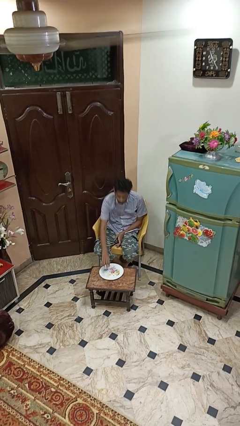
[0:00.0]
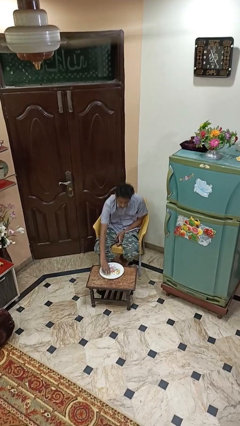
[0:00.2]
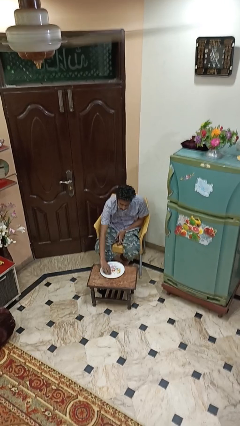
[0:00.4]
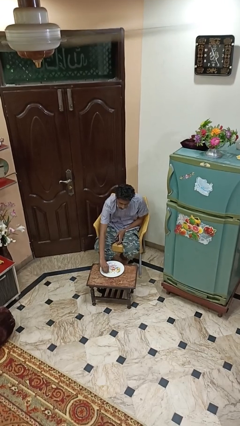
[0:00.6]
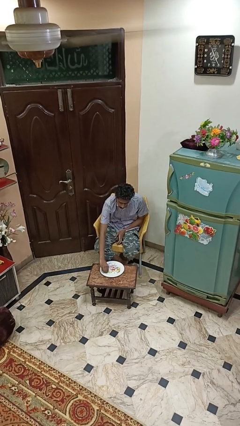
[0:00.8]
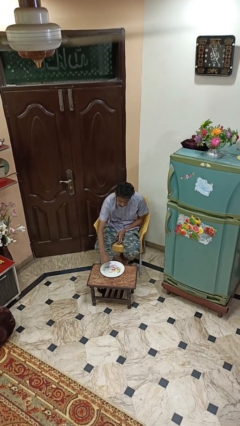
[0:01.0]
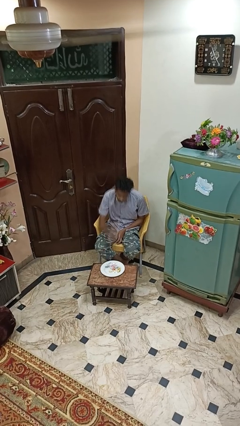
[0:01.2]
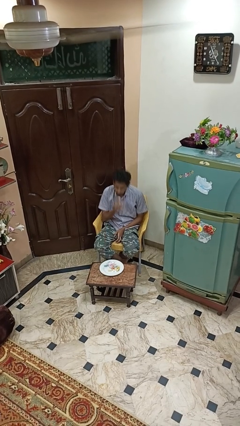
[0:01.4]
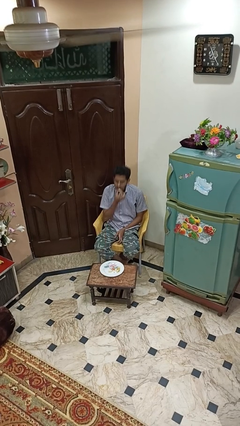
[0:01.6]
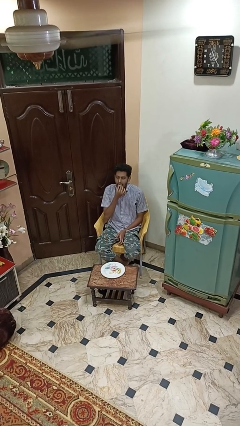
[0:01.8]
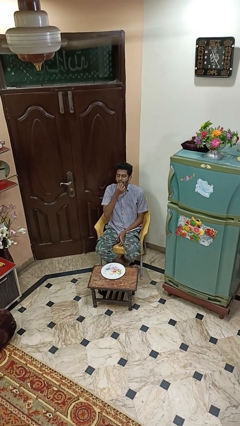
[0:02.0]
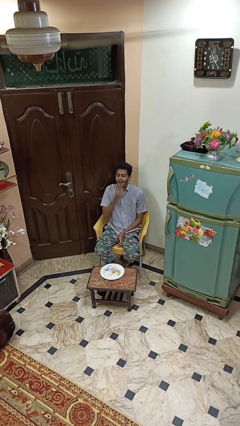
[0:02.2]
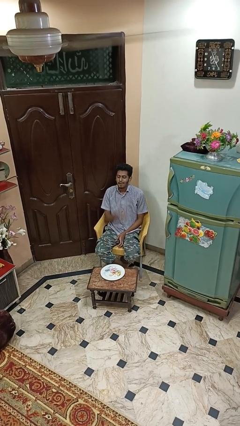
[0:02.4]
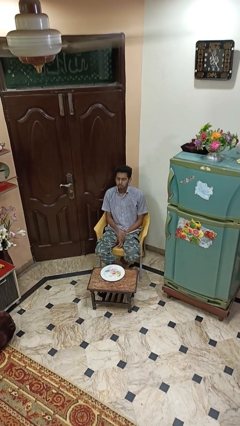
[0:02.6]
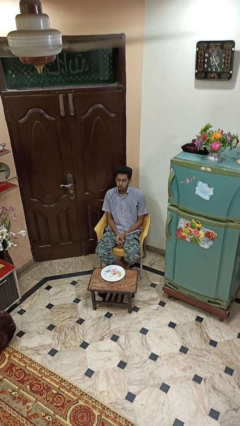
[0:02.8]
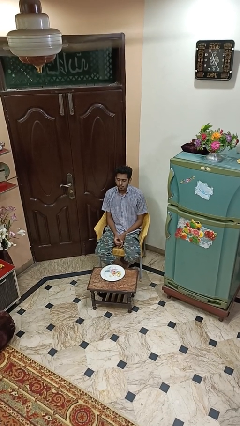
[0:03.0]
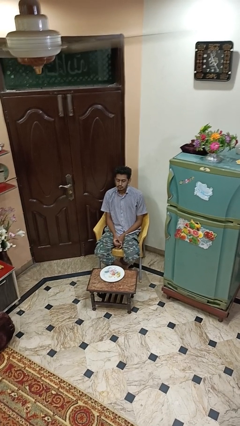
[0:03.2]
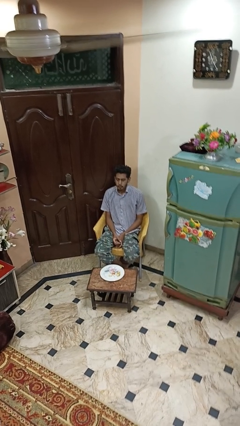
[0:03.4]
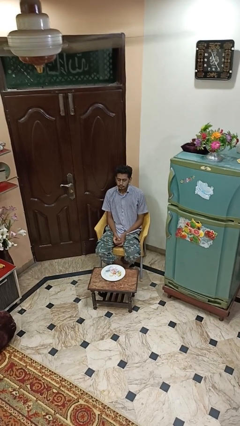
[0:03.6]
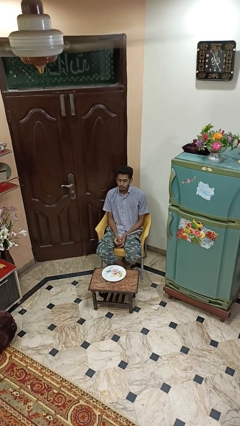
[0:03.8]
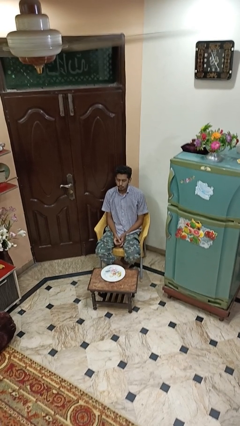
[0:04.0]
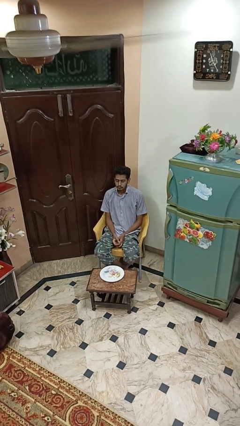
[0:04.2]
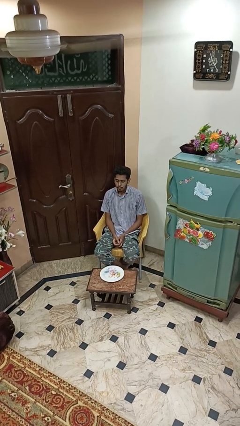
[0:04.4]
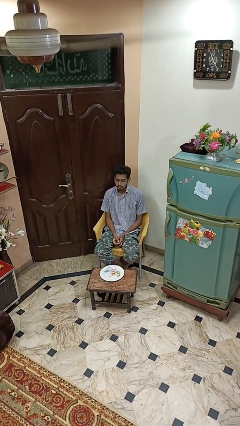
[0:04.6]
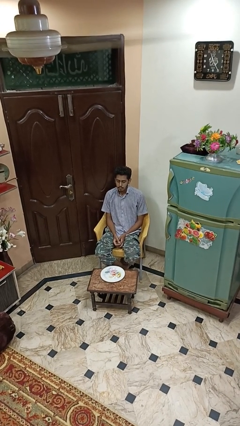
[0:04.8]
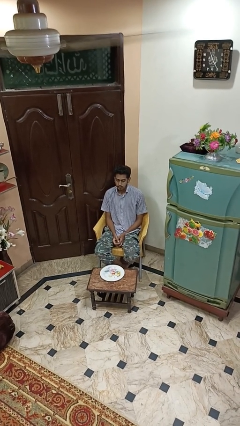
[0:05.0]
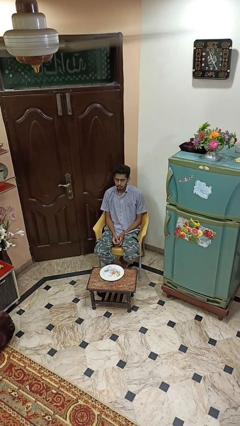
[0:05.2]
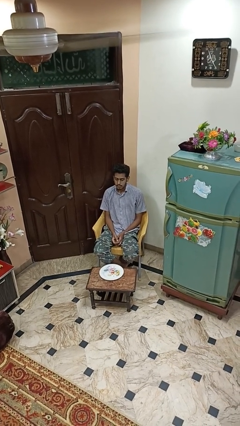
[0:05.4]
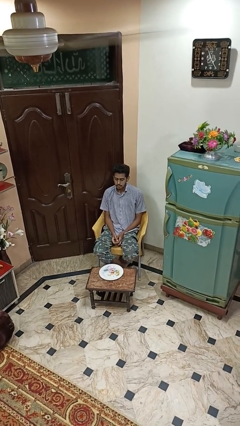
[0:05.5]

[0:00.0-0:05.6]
person eats with hands

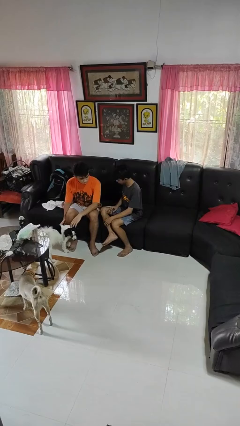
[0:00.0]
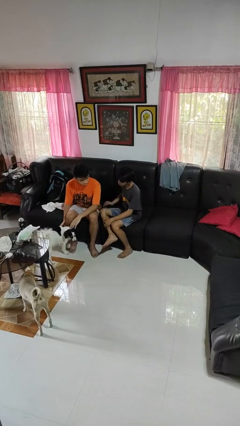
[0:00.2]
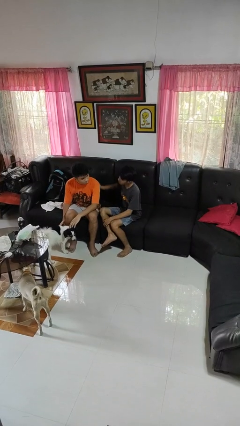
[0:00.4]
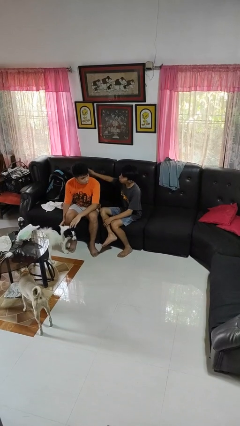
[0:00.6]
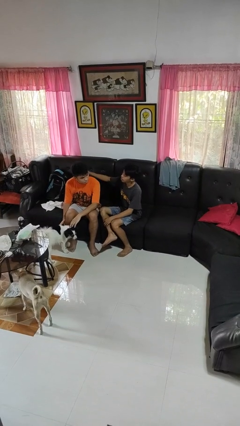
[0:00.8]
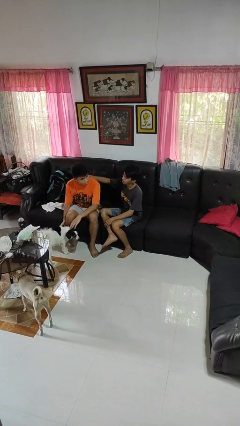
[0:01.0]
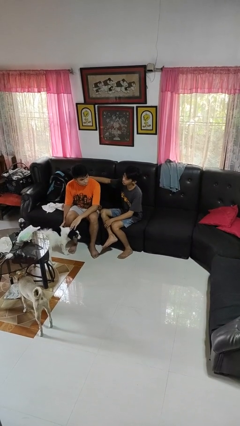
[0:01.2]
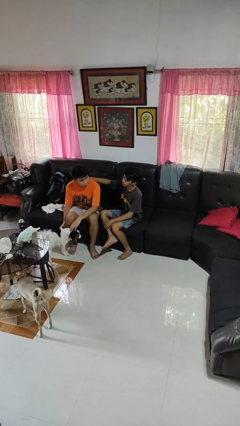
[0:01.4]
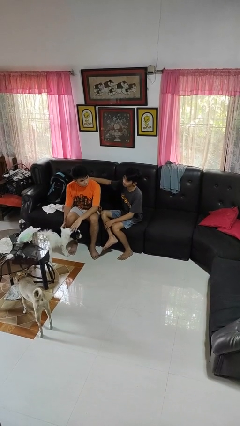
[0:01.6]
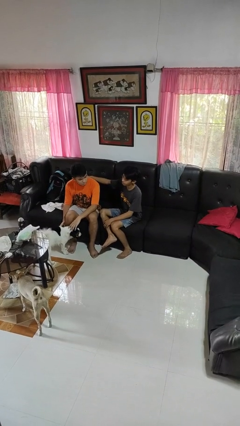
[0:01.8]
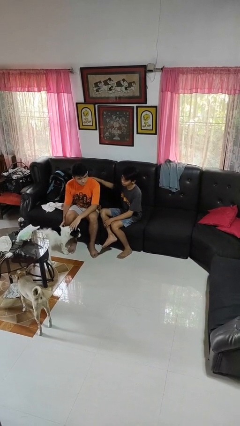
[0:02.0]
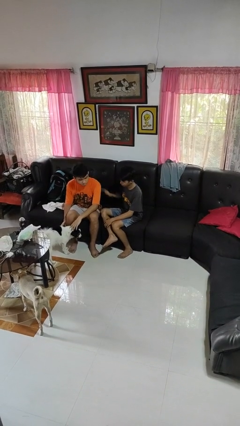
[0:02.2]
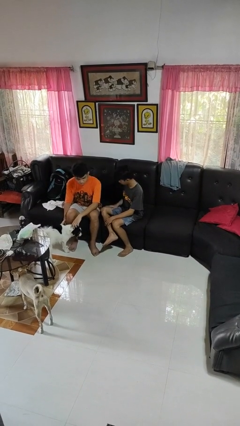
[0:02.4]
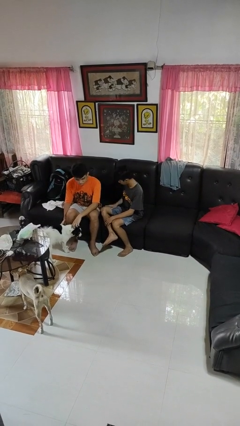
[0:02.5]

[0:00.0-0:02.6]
person touches back of person

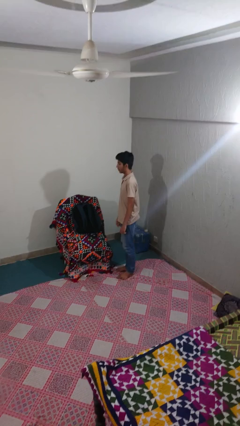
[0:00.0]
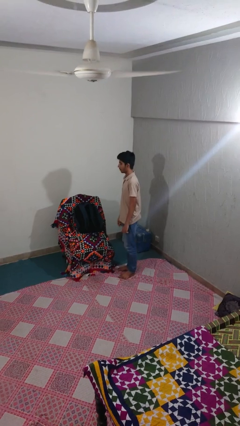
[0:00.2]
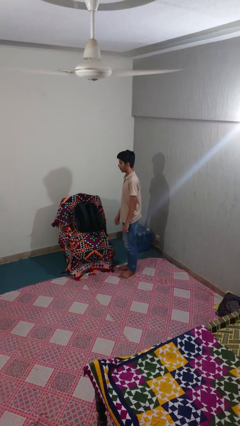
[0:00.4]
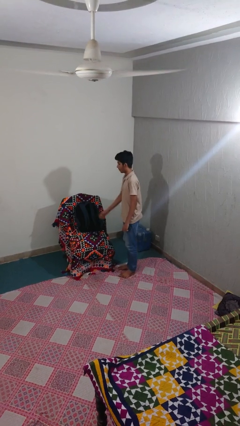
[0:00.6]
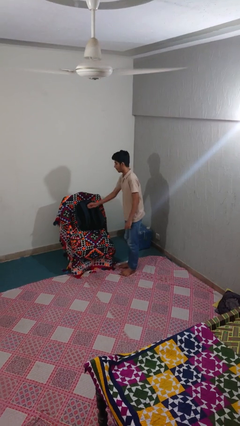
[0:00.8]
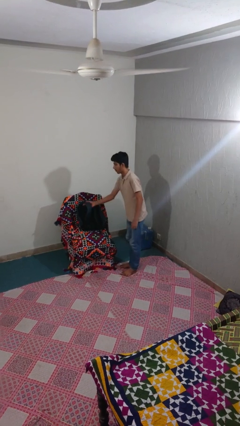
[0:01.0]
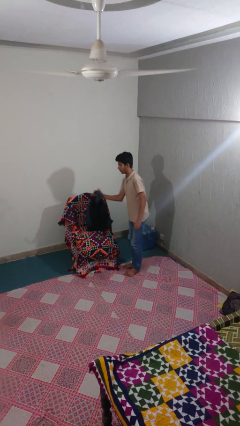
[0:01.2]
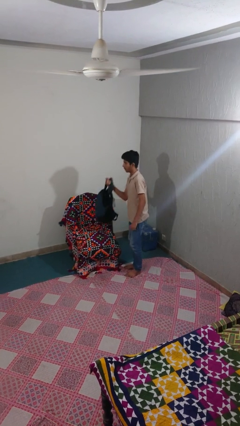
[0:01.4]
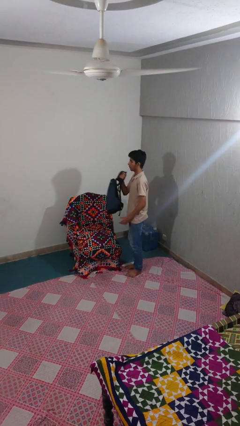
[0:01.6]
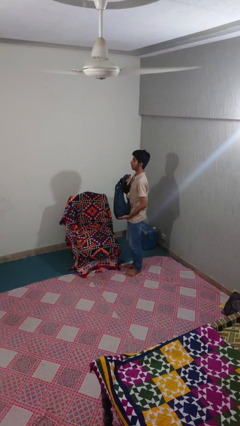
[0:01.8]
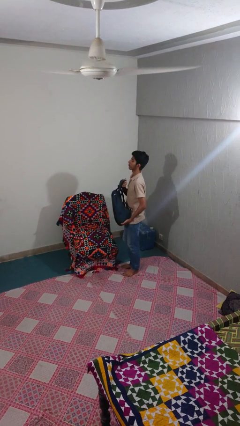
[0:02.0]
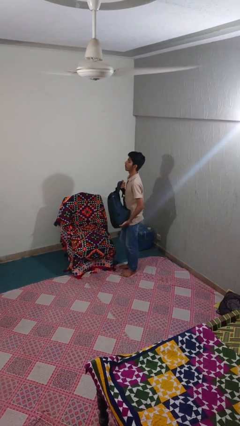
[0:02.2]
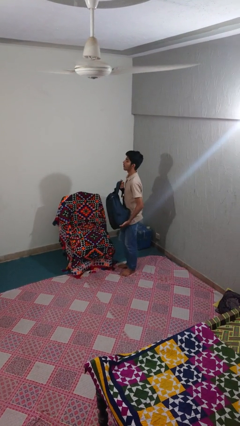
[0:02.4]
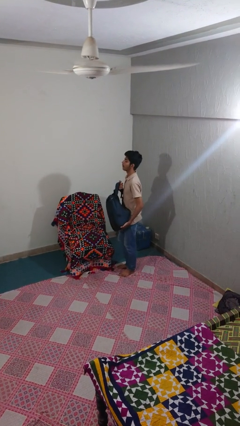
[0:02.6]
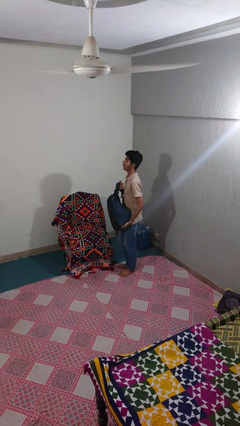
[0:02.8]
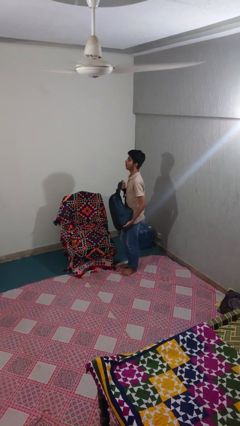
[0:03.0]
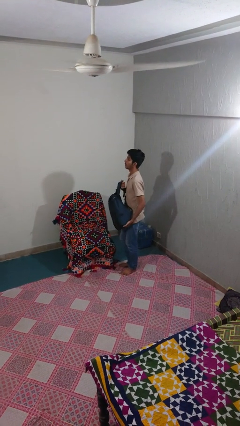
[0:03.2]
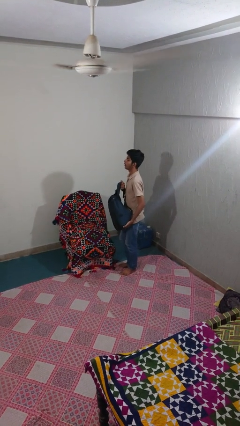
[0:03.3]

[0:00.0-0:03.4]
person picks up object from couch

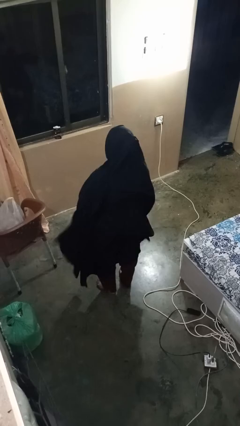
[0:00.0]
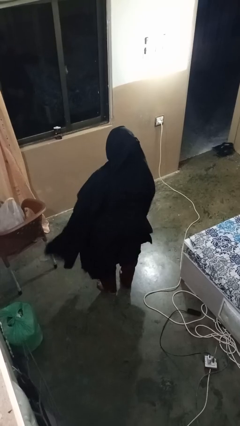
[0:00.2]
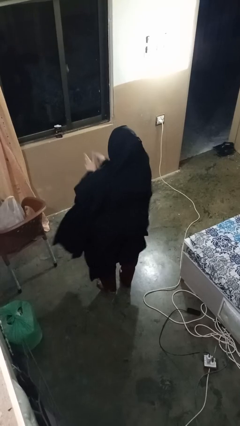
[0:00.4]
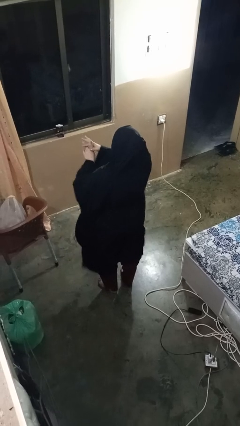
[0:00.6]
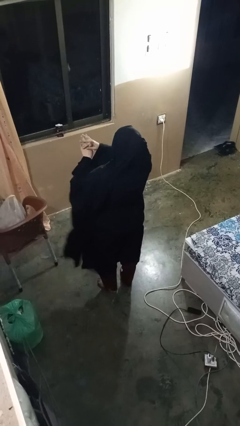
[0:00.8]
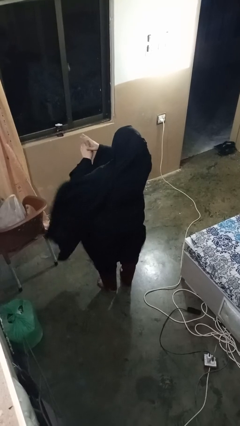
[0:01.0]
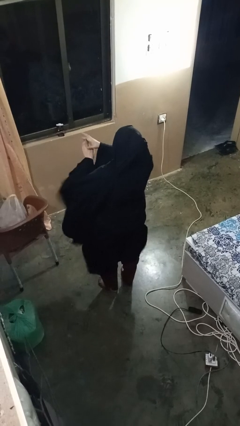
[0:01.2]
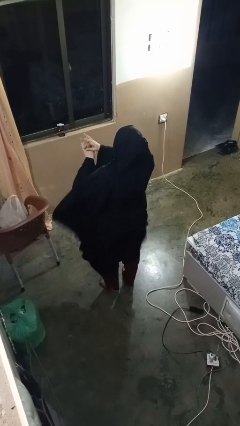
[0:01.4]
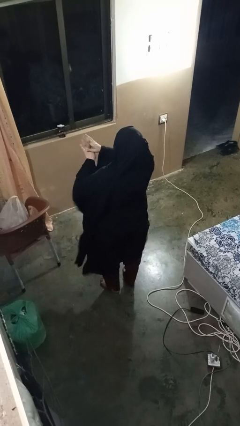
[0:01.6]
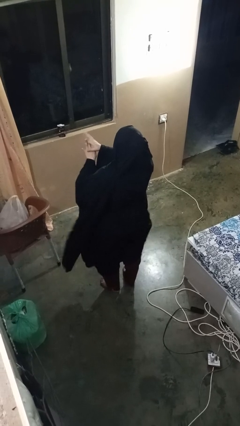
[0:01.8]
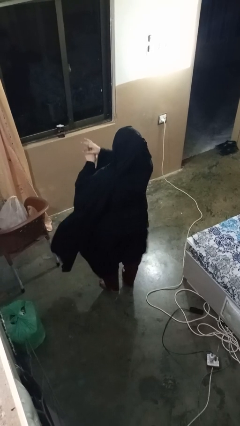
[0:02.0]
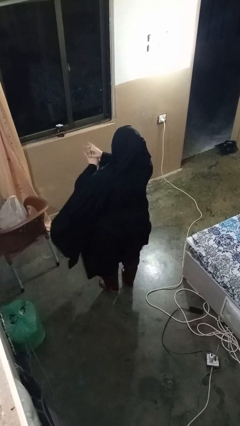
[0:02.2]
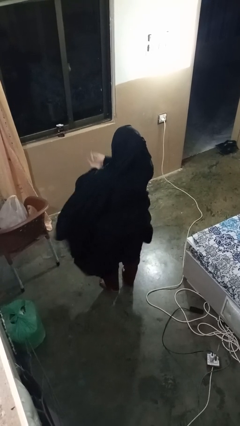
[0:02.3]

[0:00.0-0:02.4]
person cracks knuckles

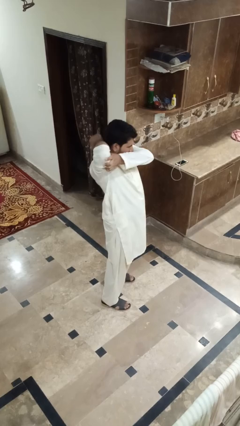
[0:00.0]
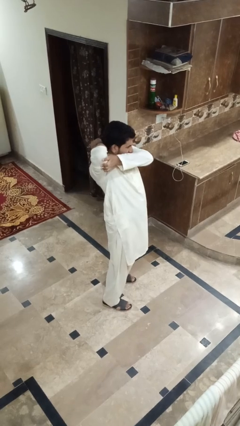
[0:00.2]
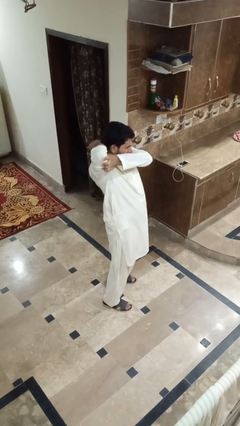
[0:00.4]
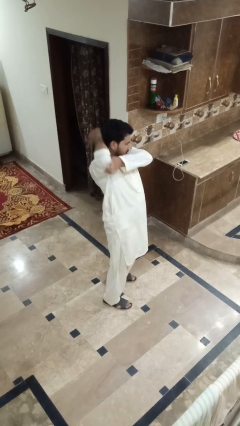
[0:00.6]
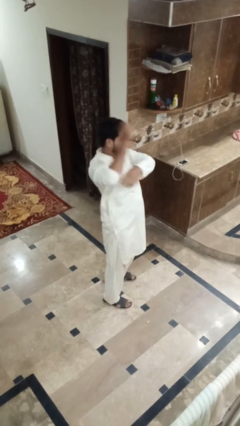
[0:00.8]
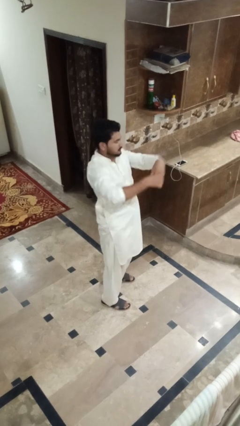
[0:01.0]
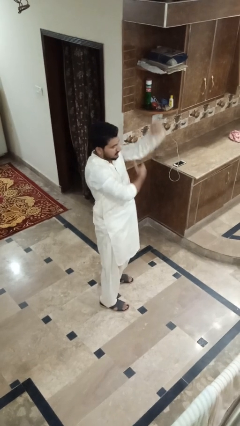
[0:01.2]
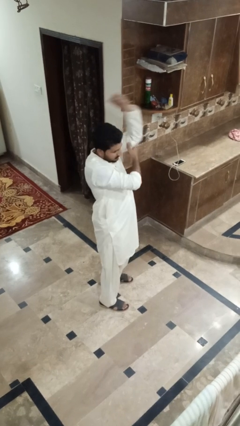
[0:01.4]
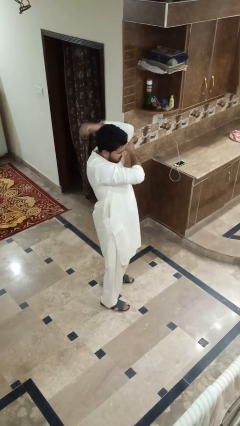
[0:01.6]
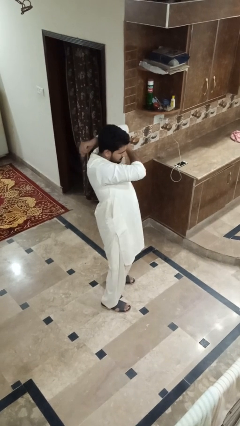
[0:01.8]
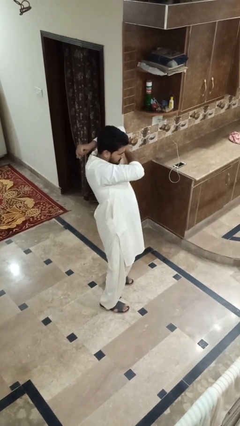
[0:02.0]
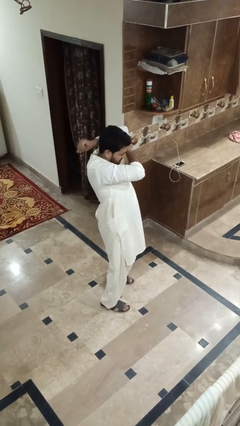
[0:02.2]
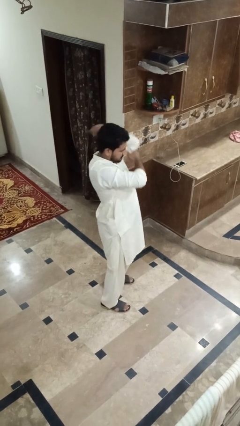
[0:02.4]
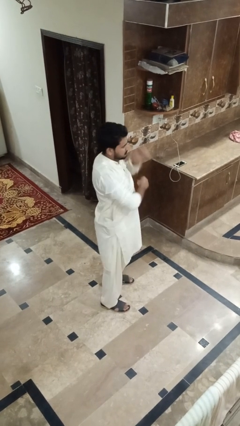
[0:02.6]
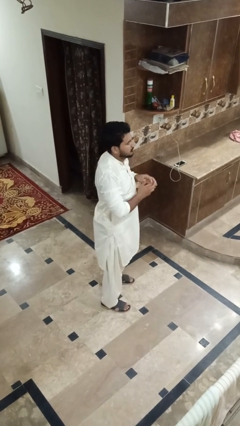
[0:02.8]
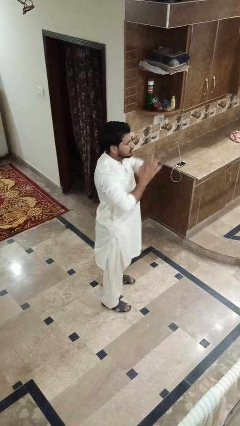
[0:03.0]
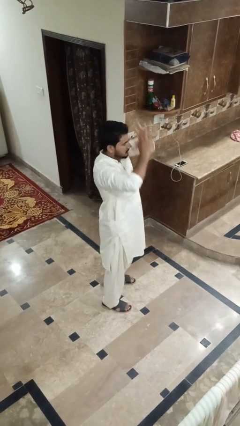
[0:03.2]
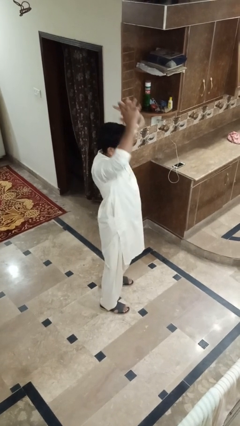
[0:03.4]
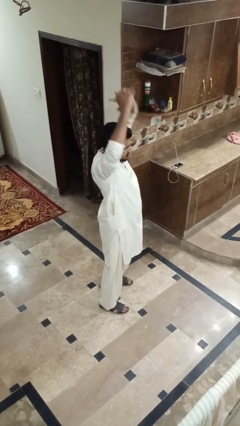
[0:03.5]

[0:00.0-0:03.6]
person stretches arms to side

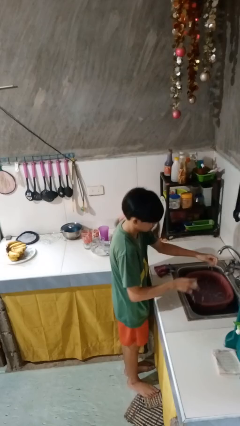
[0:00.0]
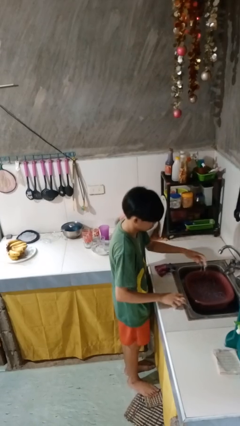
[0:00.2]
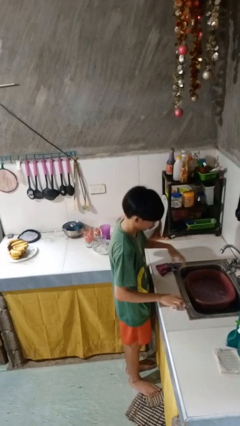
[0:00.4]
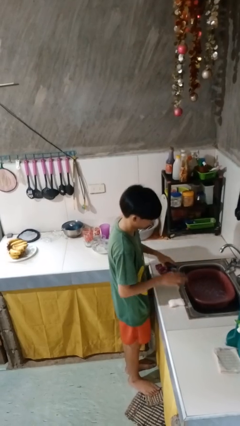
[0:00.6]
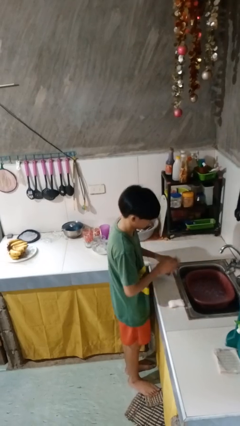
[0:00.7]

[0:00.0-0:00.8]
person dries hands with towel
